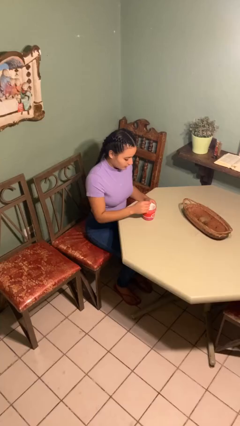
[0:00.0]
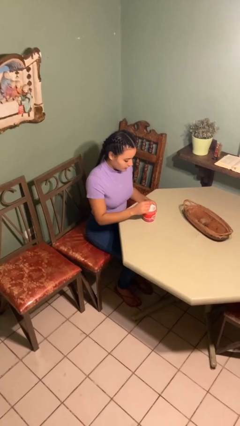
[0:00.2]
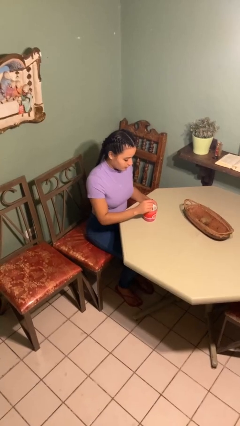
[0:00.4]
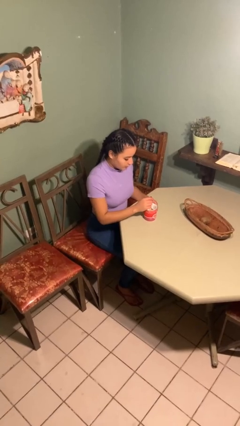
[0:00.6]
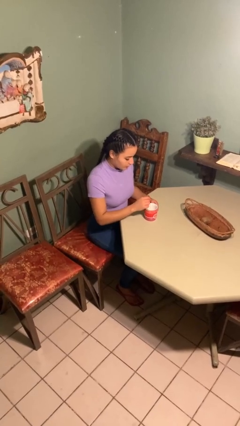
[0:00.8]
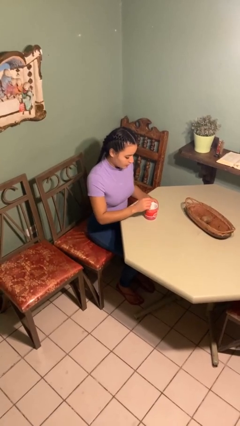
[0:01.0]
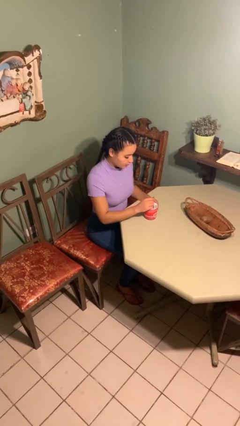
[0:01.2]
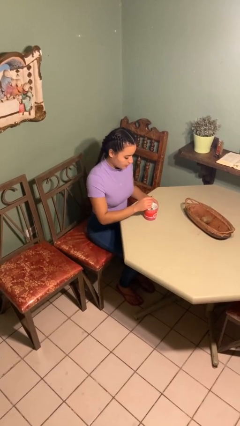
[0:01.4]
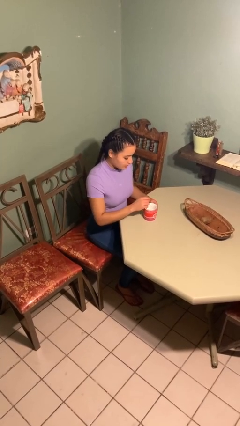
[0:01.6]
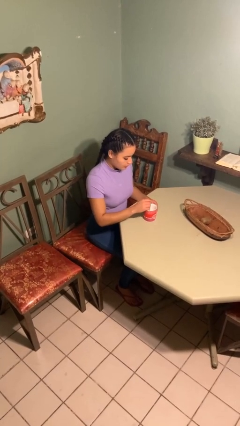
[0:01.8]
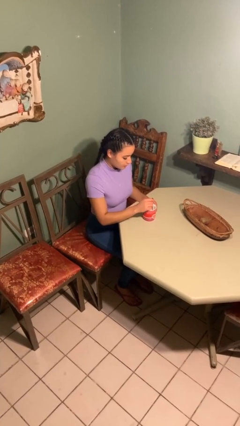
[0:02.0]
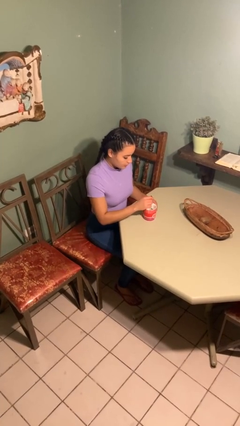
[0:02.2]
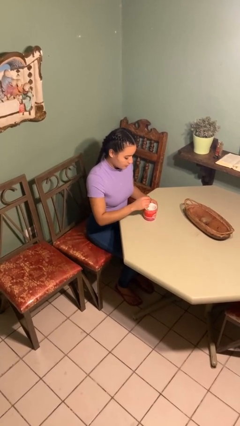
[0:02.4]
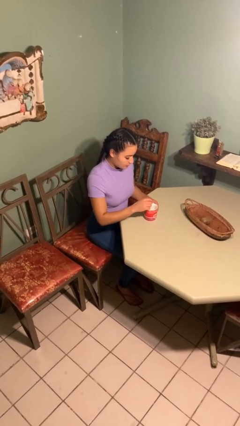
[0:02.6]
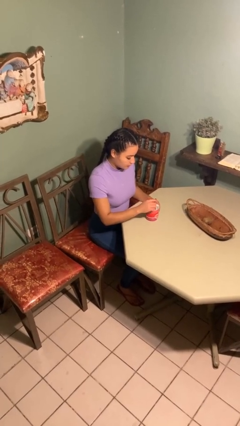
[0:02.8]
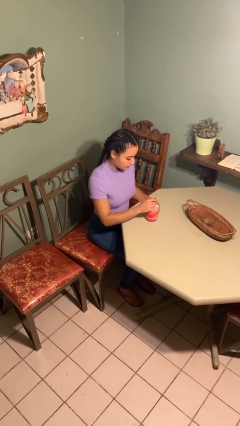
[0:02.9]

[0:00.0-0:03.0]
person stirs mug

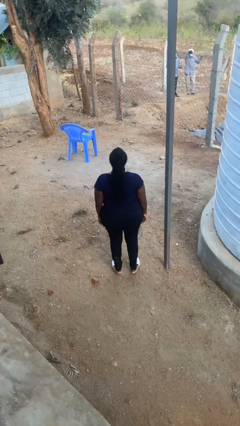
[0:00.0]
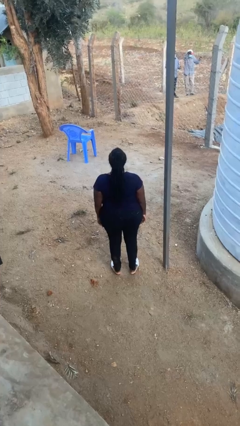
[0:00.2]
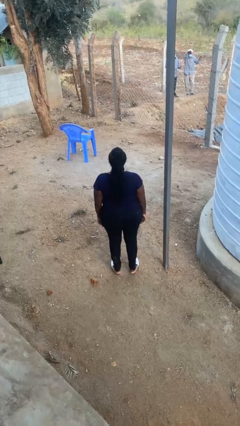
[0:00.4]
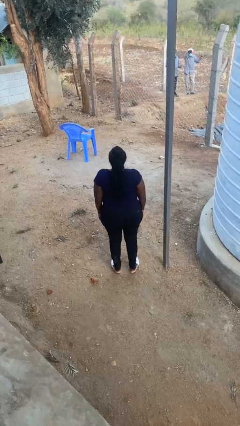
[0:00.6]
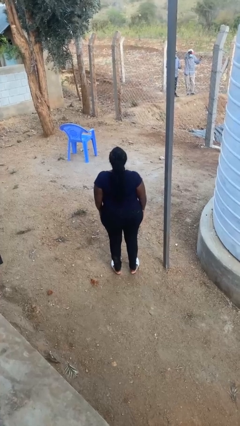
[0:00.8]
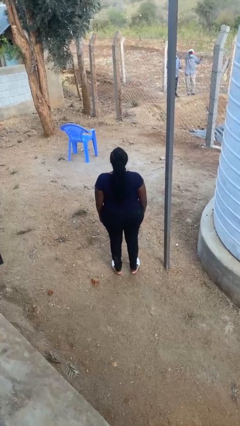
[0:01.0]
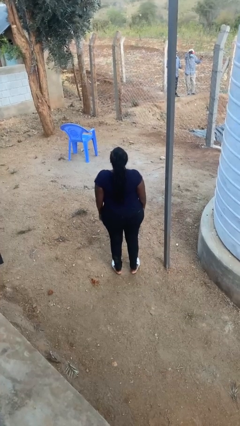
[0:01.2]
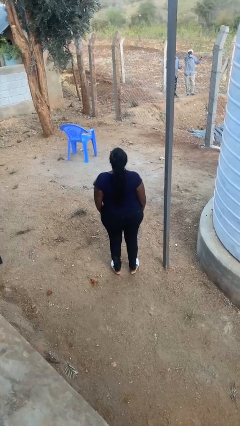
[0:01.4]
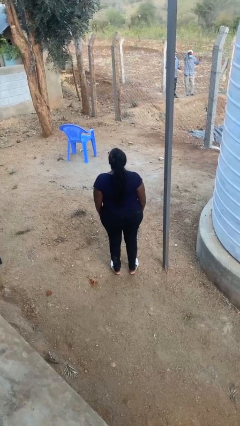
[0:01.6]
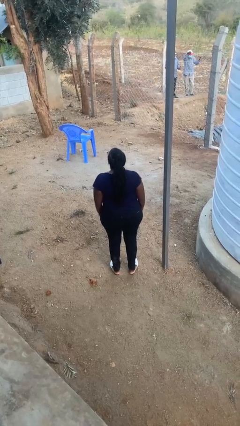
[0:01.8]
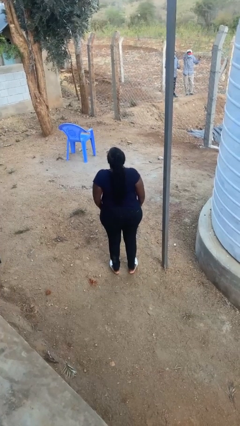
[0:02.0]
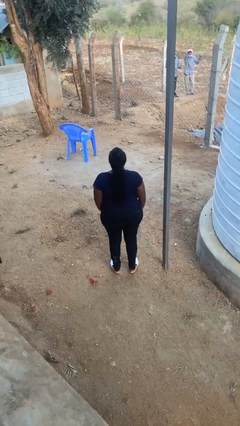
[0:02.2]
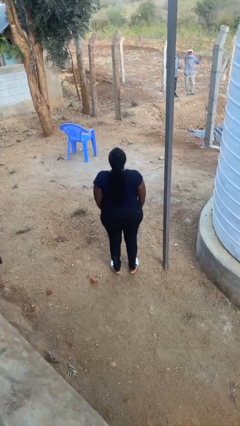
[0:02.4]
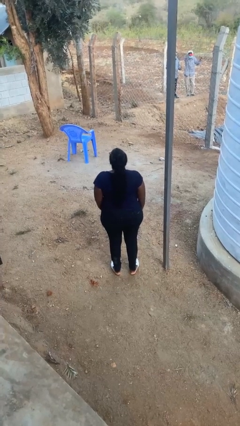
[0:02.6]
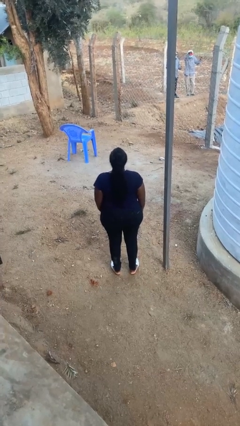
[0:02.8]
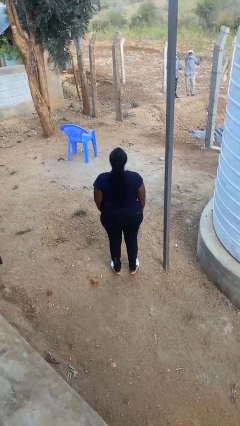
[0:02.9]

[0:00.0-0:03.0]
person shrugs

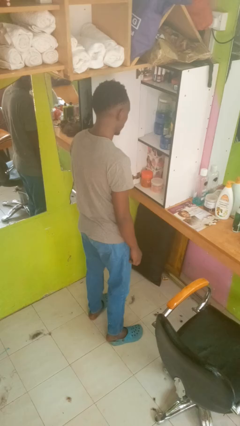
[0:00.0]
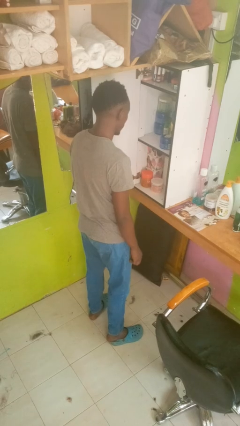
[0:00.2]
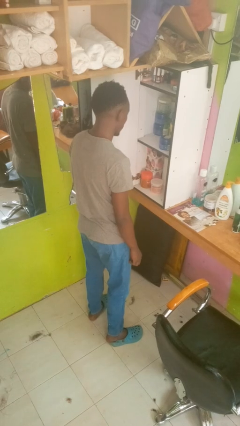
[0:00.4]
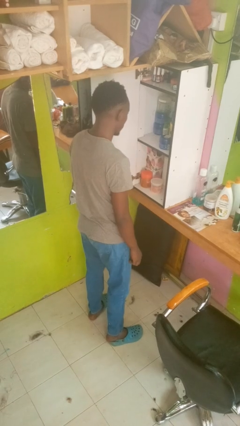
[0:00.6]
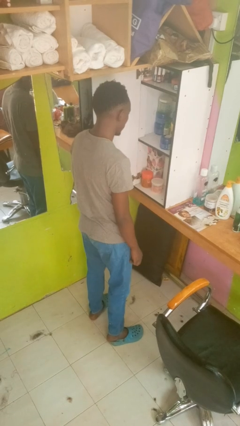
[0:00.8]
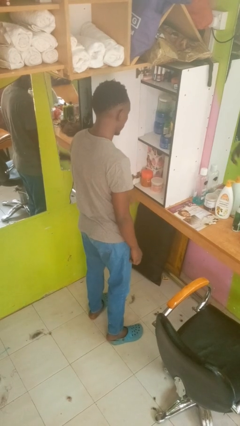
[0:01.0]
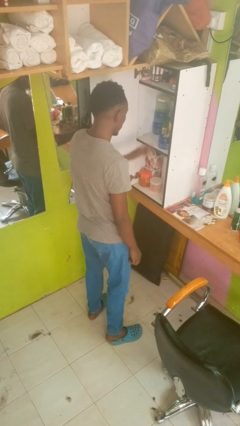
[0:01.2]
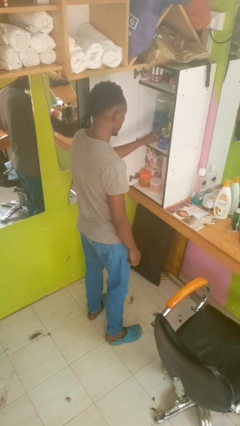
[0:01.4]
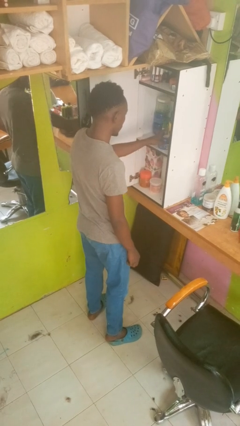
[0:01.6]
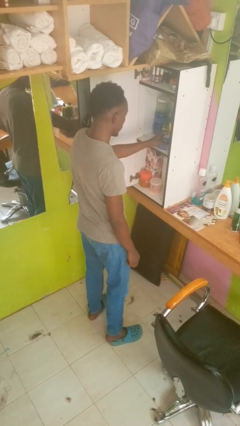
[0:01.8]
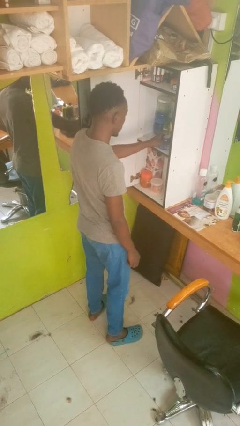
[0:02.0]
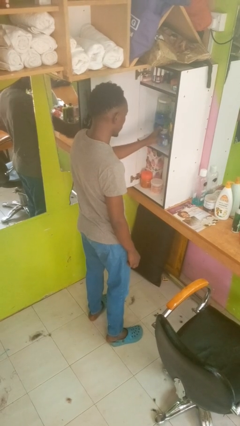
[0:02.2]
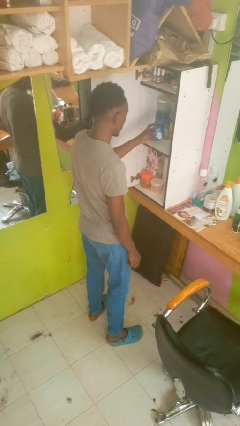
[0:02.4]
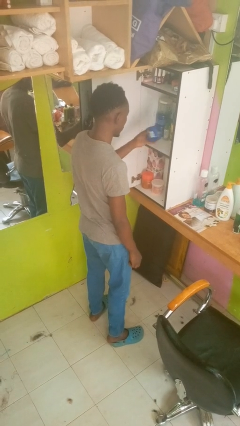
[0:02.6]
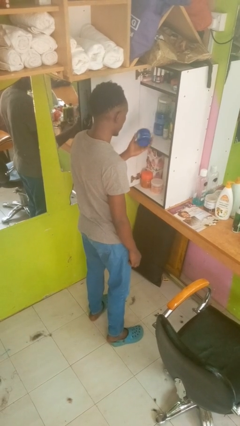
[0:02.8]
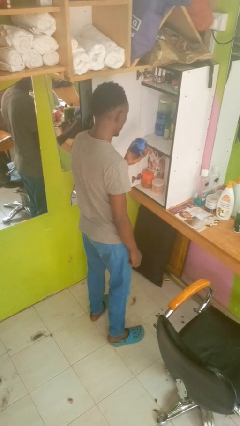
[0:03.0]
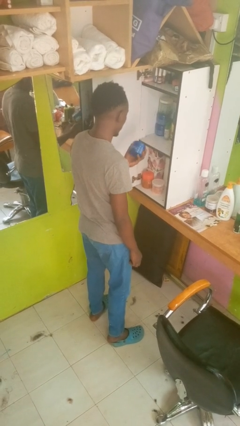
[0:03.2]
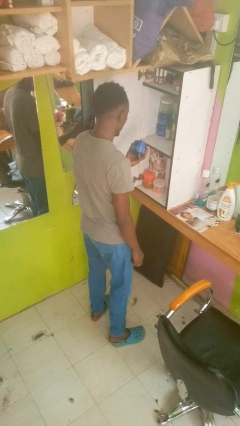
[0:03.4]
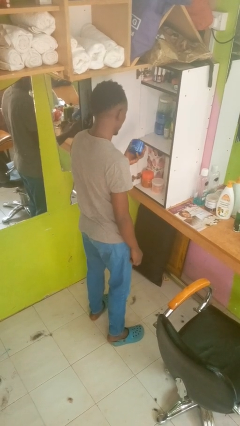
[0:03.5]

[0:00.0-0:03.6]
person picks up object from cabinet

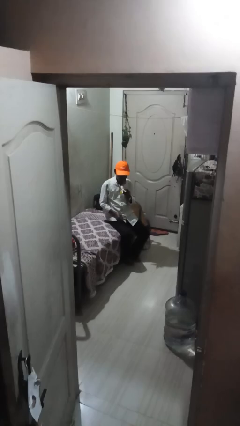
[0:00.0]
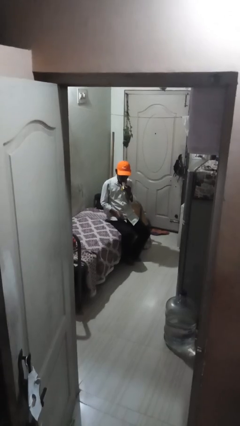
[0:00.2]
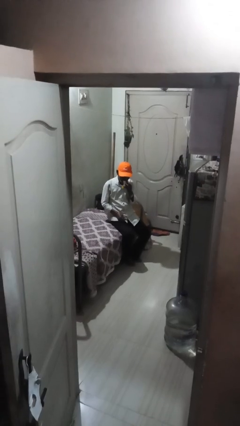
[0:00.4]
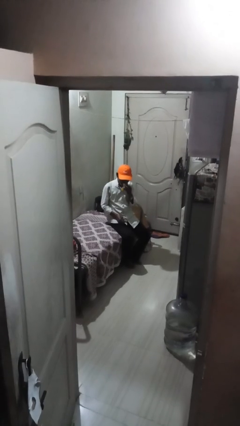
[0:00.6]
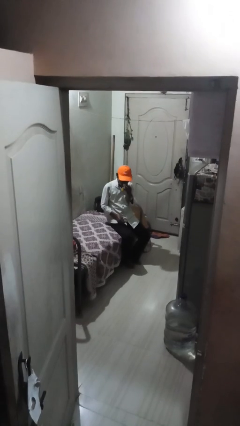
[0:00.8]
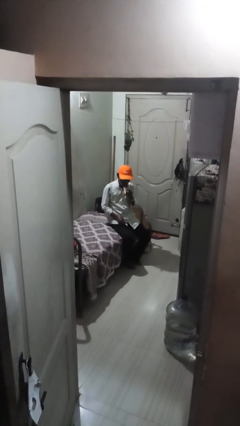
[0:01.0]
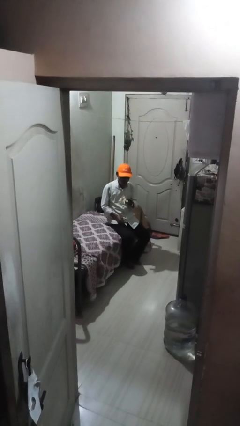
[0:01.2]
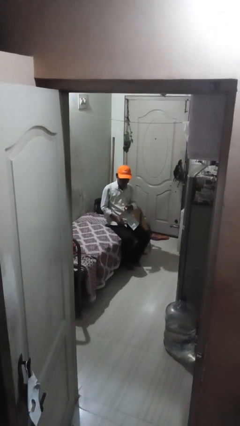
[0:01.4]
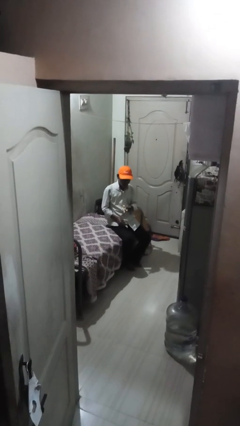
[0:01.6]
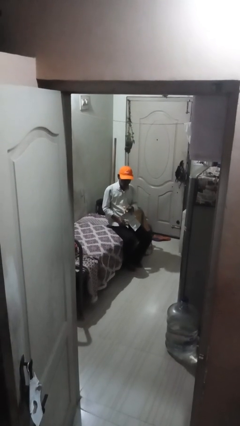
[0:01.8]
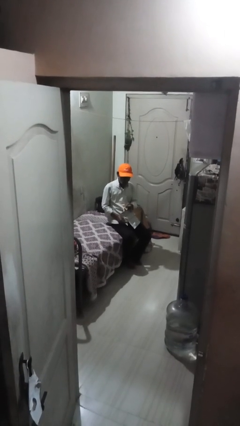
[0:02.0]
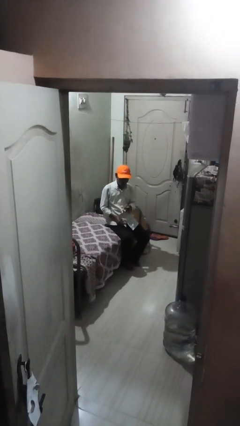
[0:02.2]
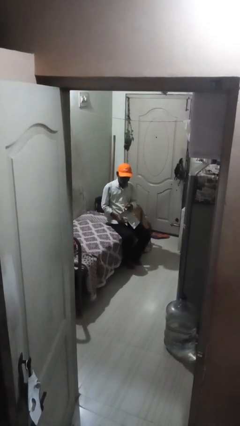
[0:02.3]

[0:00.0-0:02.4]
person eats banana

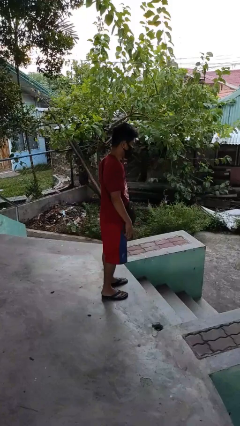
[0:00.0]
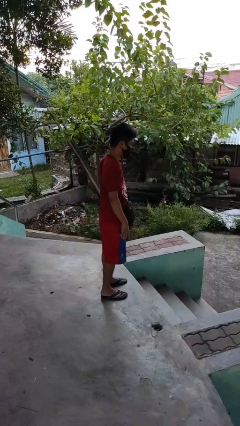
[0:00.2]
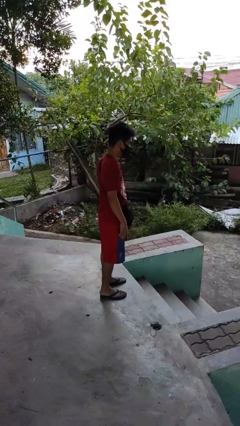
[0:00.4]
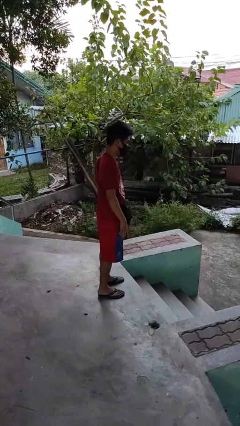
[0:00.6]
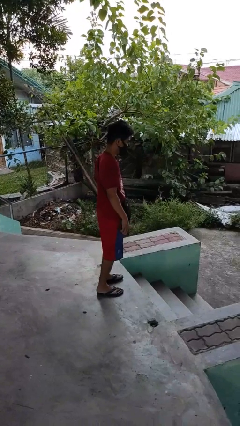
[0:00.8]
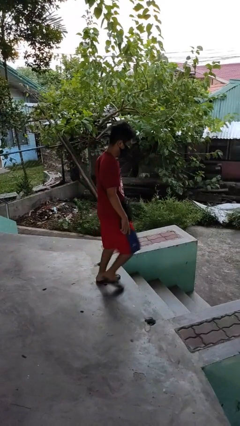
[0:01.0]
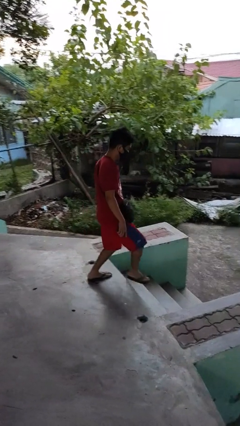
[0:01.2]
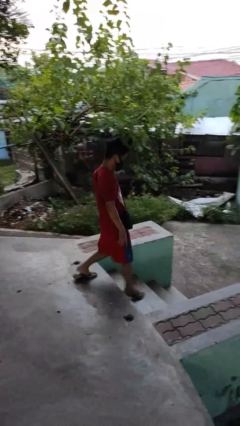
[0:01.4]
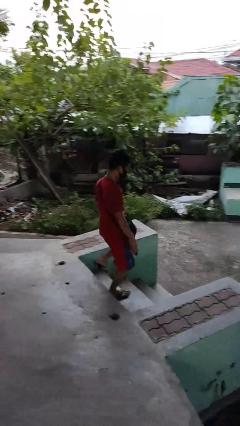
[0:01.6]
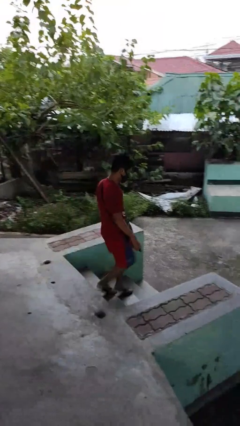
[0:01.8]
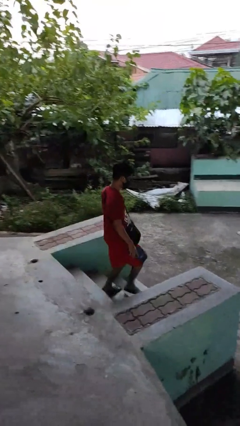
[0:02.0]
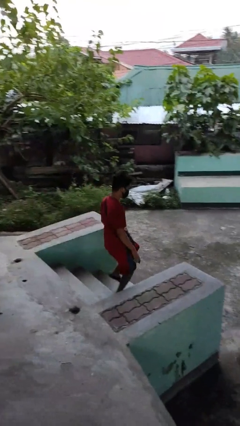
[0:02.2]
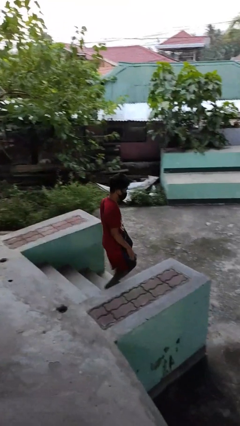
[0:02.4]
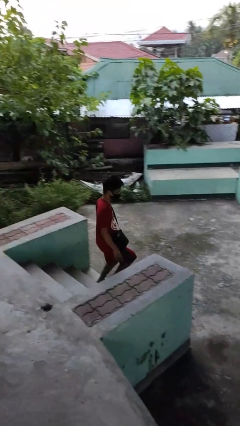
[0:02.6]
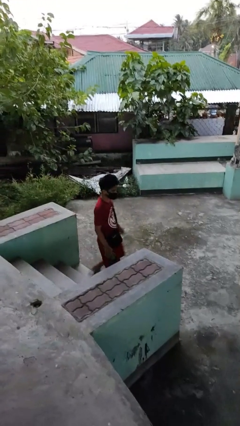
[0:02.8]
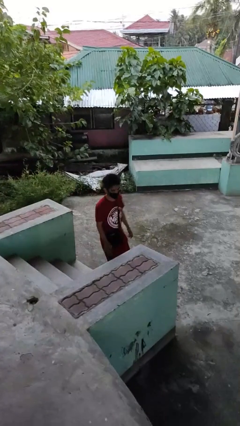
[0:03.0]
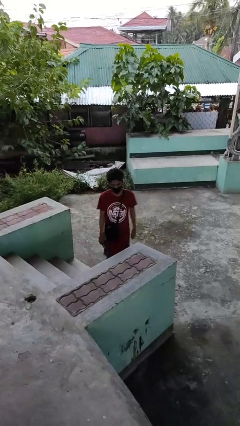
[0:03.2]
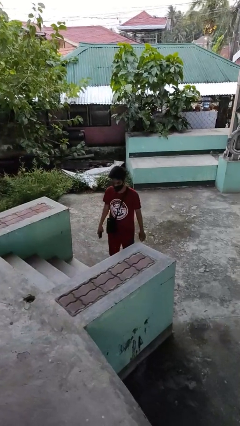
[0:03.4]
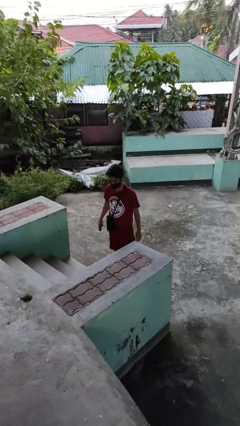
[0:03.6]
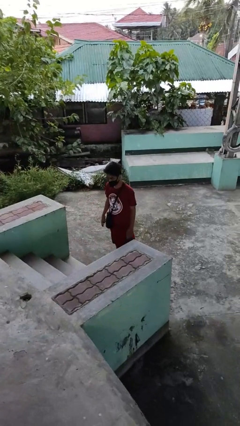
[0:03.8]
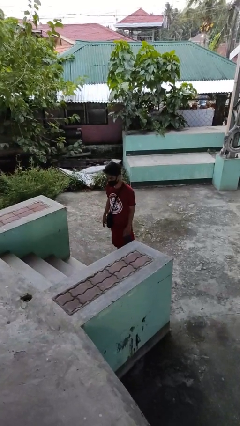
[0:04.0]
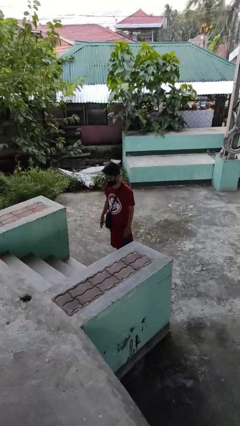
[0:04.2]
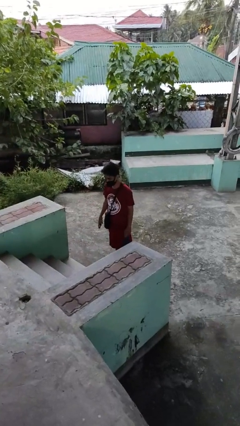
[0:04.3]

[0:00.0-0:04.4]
person climbs down stairs

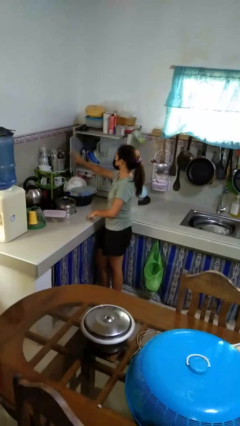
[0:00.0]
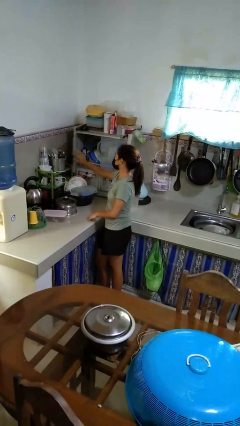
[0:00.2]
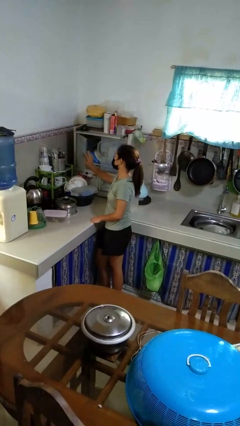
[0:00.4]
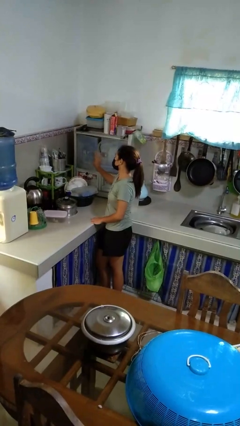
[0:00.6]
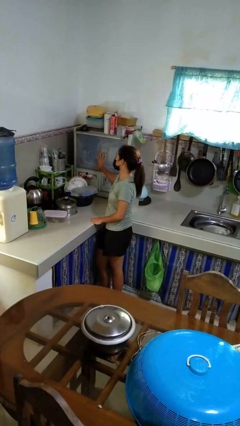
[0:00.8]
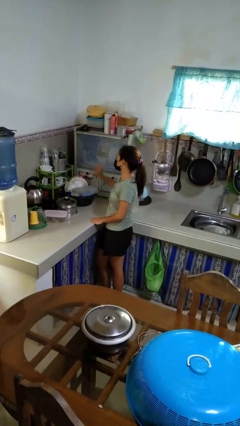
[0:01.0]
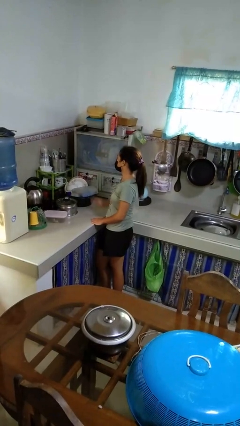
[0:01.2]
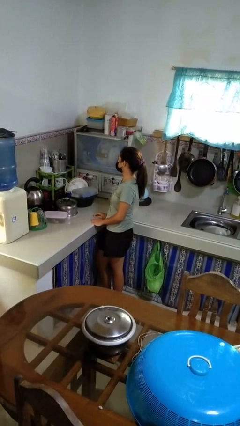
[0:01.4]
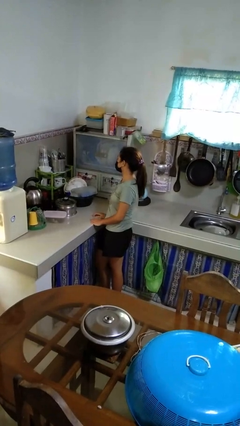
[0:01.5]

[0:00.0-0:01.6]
person closes kitchen drawer
